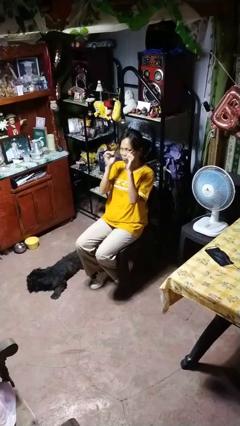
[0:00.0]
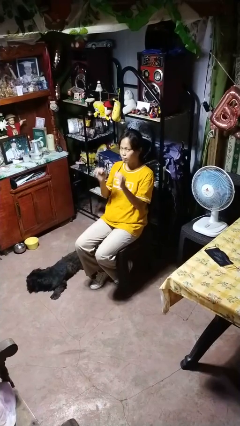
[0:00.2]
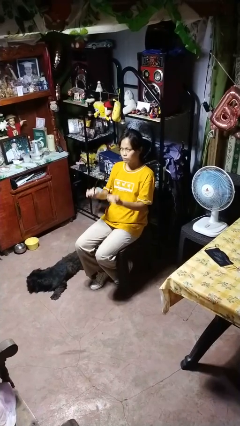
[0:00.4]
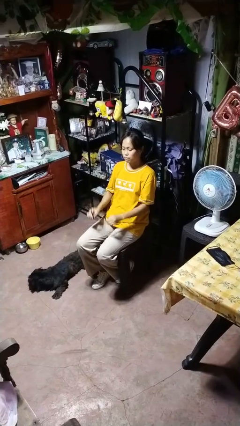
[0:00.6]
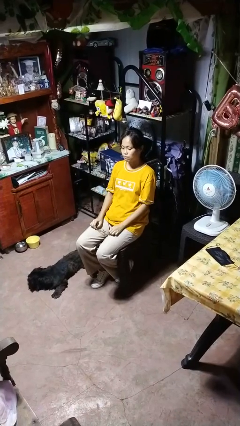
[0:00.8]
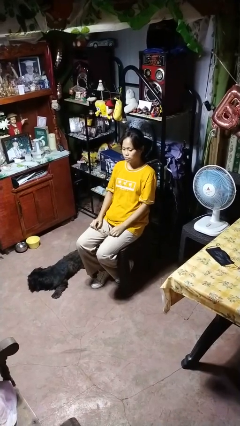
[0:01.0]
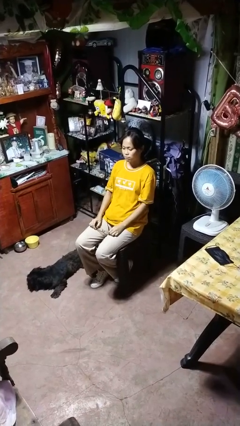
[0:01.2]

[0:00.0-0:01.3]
person takes off glasses

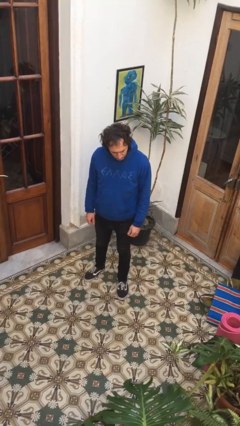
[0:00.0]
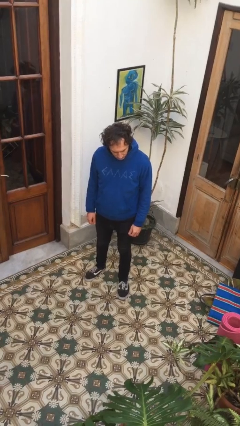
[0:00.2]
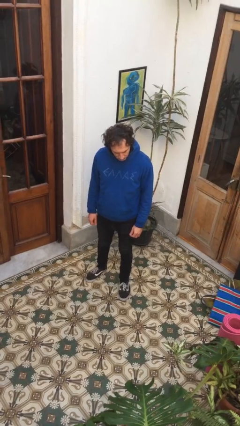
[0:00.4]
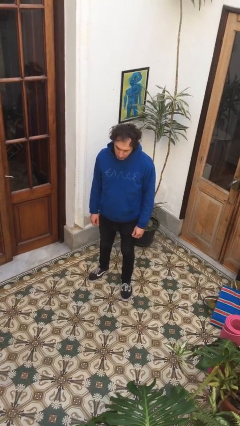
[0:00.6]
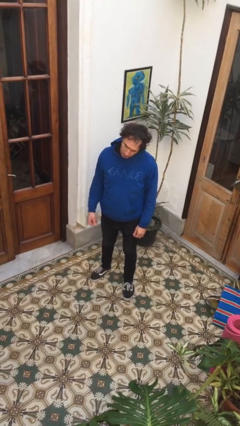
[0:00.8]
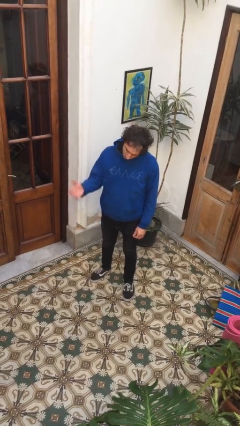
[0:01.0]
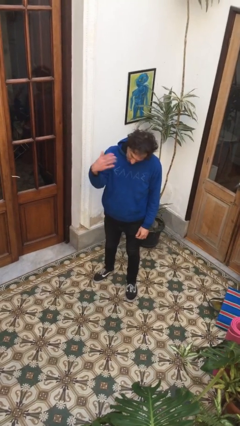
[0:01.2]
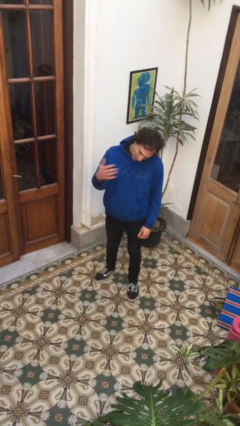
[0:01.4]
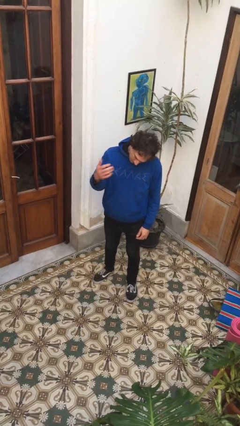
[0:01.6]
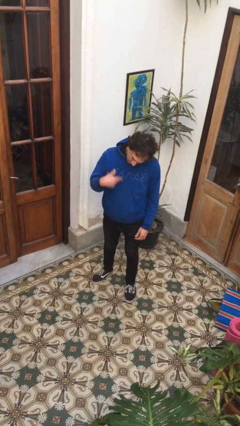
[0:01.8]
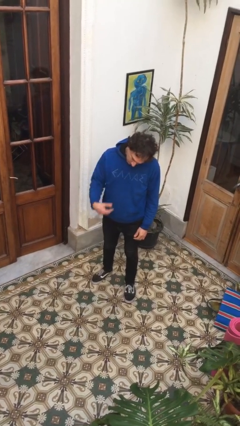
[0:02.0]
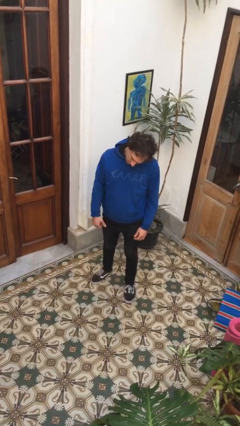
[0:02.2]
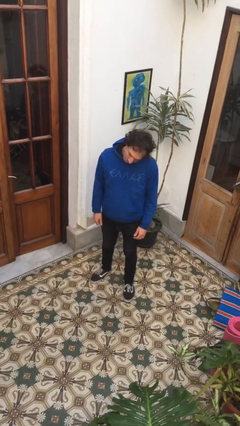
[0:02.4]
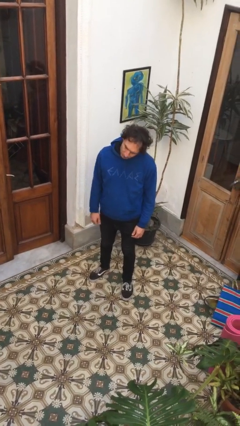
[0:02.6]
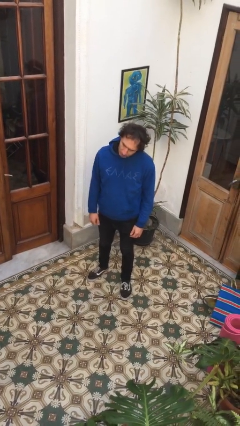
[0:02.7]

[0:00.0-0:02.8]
person gestures come here

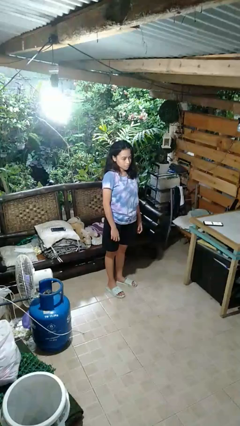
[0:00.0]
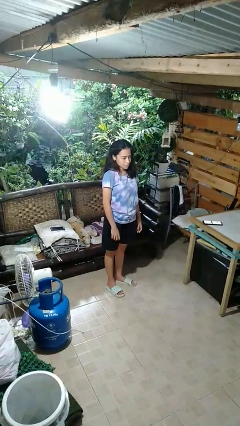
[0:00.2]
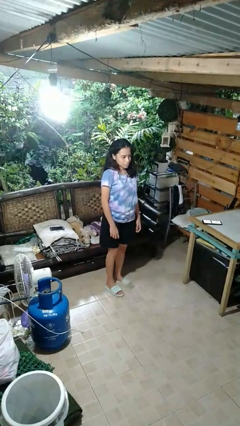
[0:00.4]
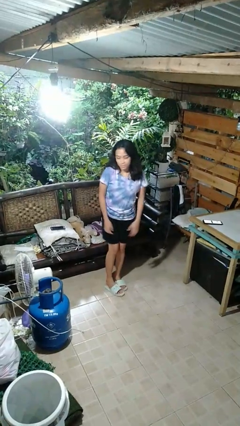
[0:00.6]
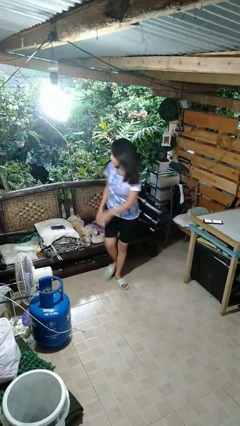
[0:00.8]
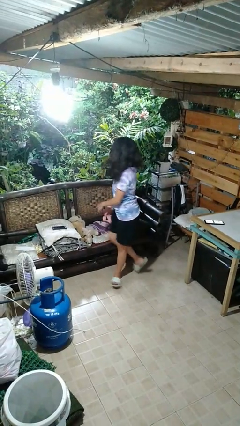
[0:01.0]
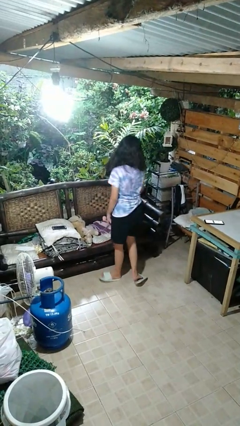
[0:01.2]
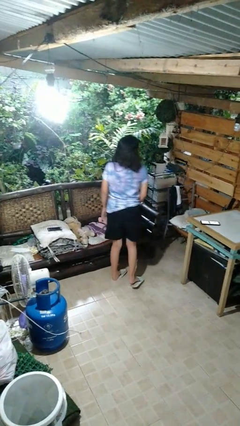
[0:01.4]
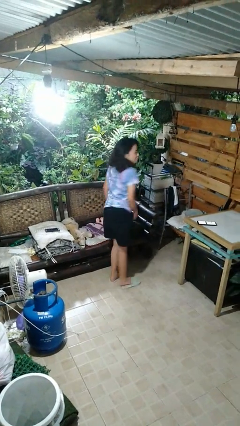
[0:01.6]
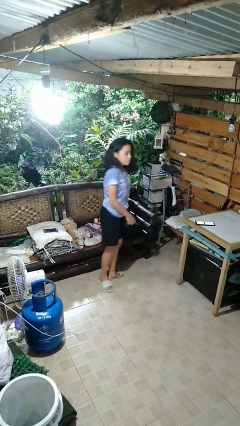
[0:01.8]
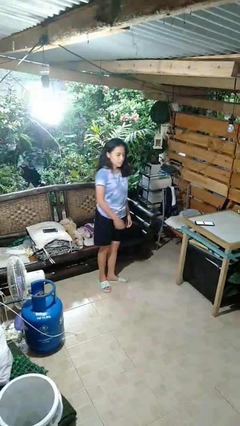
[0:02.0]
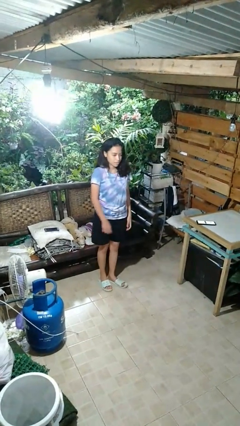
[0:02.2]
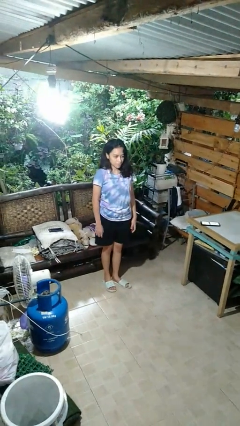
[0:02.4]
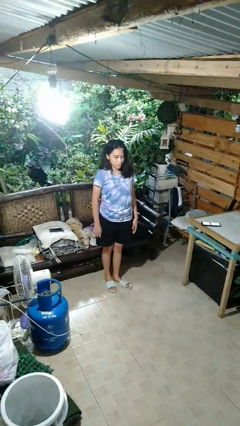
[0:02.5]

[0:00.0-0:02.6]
person twirls

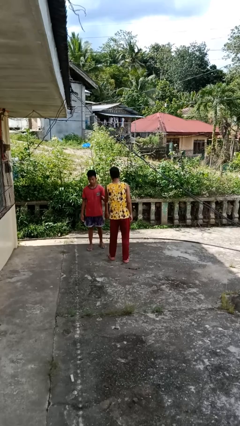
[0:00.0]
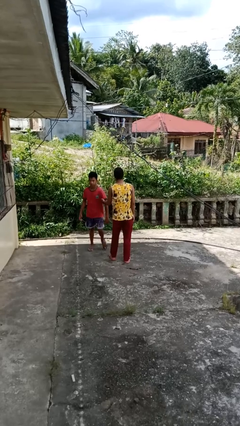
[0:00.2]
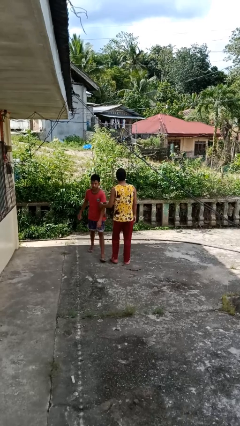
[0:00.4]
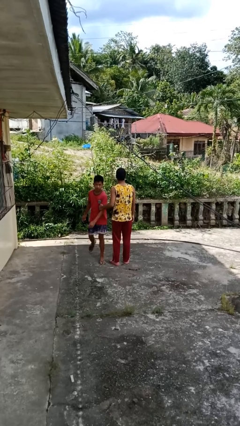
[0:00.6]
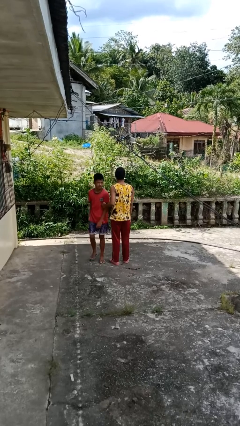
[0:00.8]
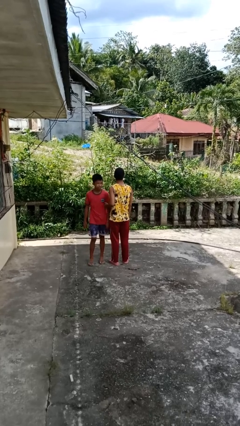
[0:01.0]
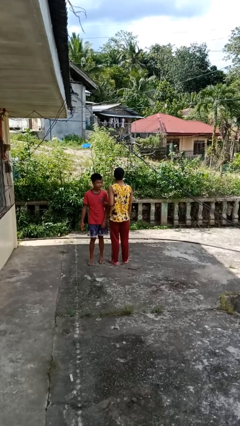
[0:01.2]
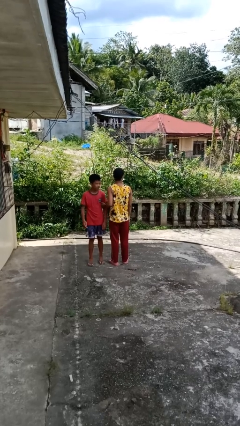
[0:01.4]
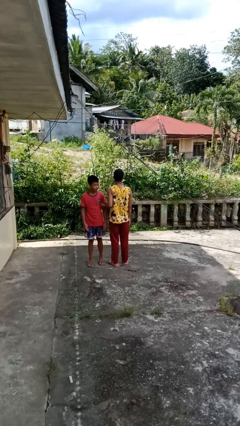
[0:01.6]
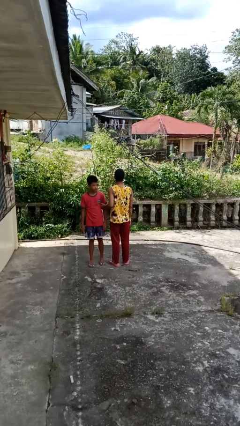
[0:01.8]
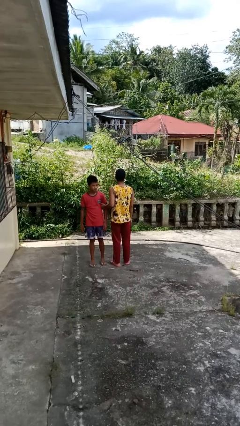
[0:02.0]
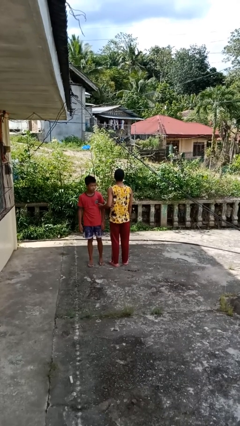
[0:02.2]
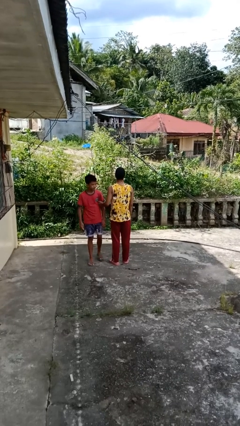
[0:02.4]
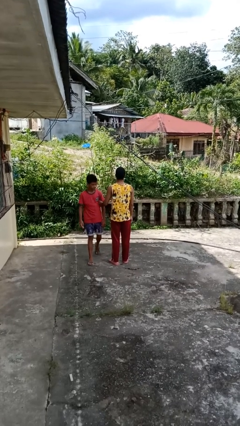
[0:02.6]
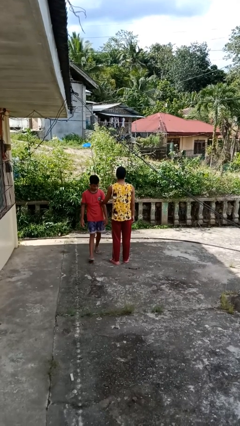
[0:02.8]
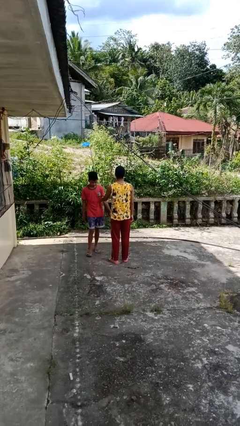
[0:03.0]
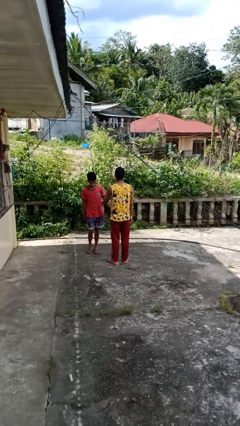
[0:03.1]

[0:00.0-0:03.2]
person grabs person by bicep

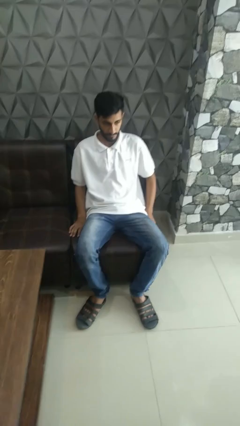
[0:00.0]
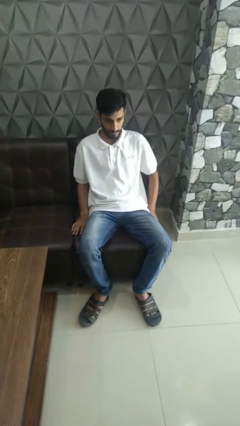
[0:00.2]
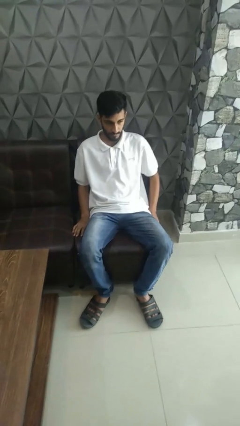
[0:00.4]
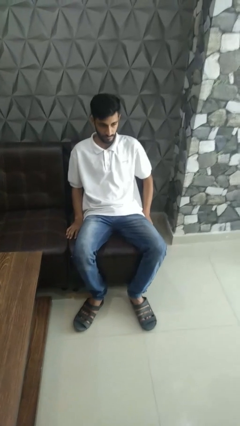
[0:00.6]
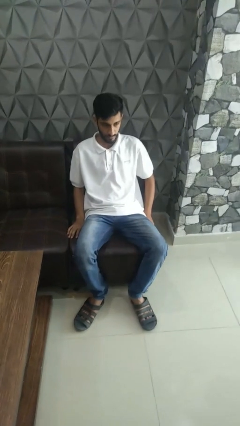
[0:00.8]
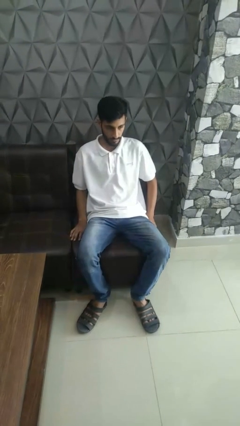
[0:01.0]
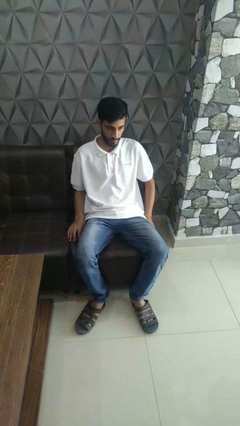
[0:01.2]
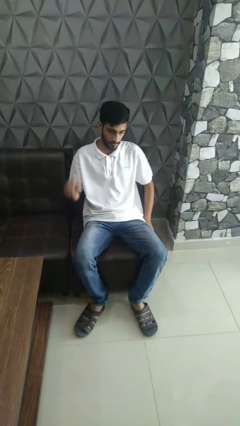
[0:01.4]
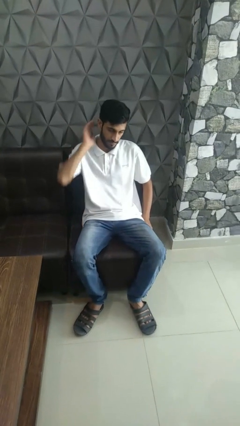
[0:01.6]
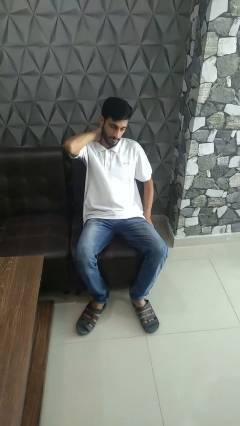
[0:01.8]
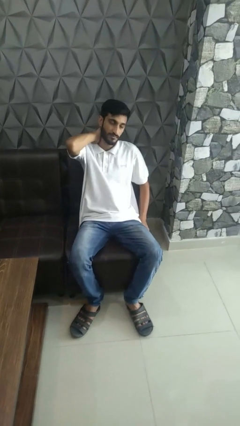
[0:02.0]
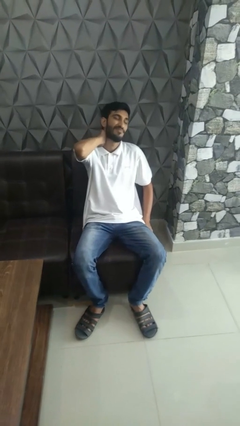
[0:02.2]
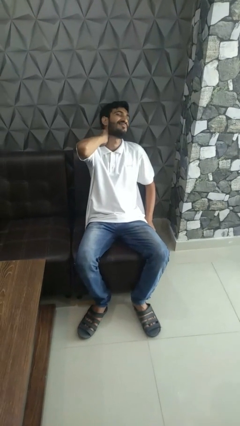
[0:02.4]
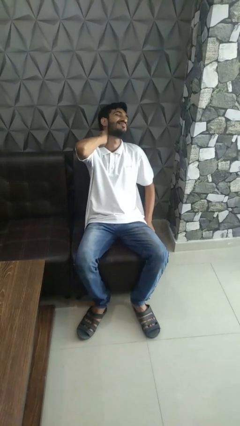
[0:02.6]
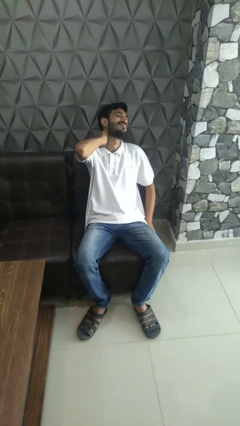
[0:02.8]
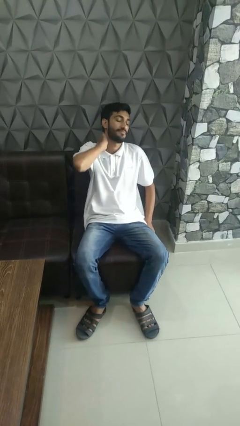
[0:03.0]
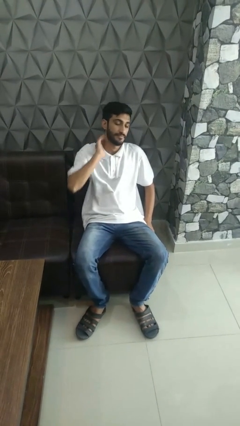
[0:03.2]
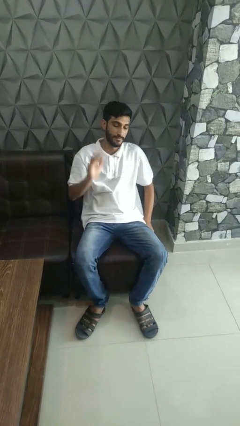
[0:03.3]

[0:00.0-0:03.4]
person rubs neck

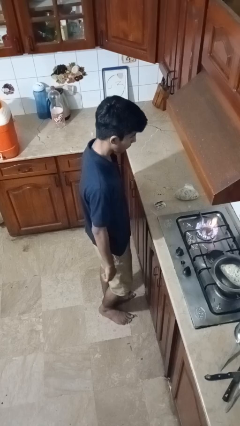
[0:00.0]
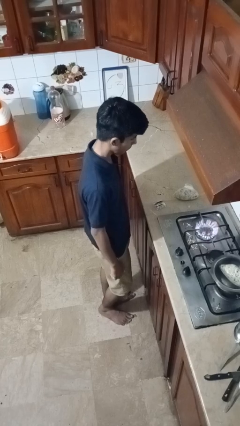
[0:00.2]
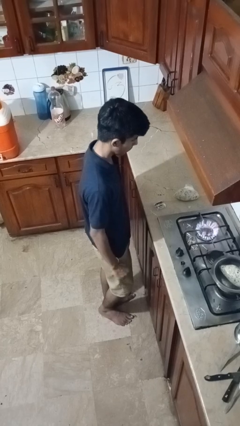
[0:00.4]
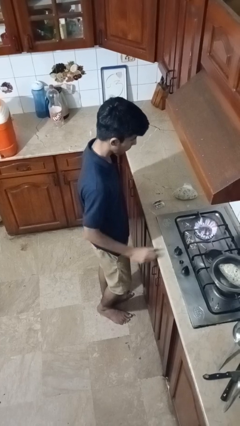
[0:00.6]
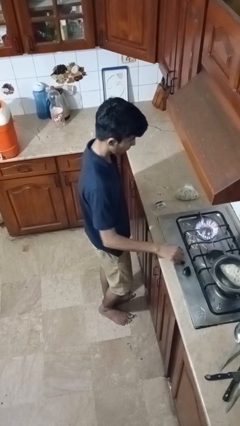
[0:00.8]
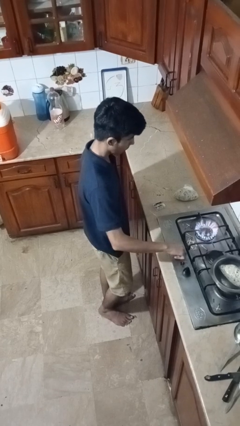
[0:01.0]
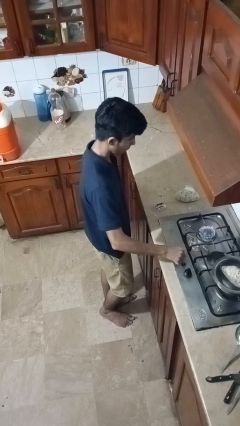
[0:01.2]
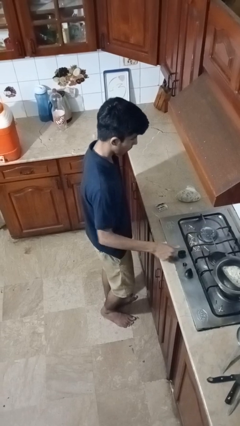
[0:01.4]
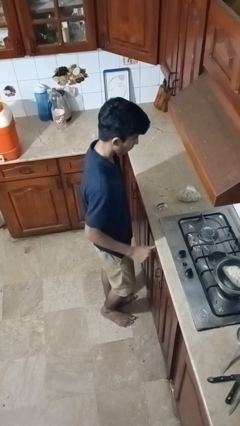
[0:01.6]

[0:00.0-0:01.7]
person turns off stovetop

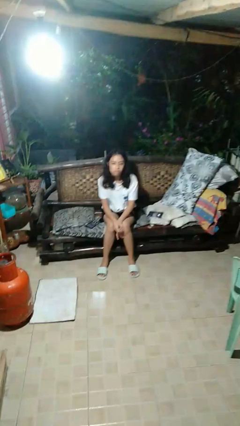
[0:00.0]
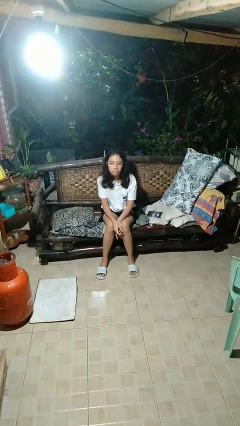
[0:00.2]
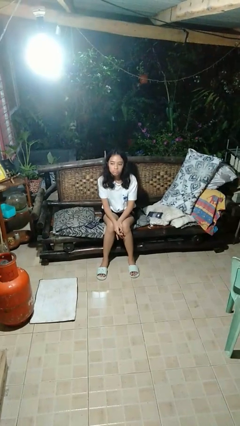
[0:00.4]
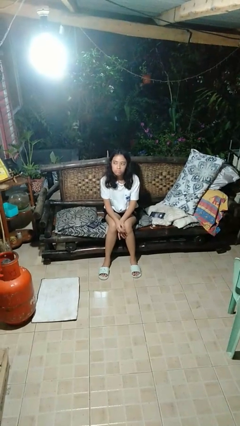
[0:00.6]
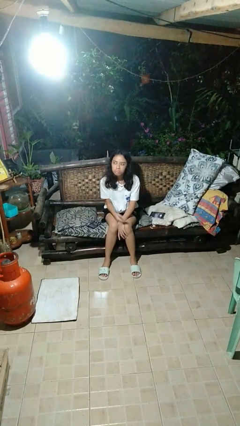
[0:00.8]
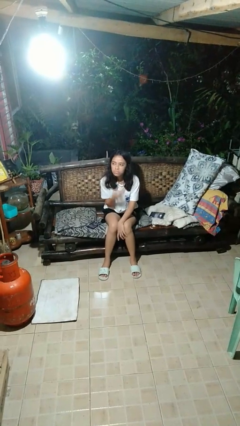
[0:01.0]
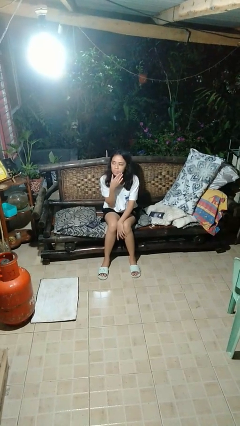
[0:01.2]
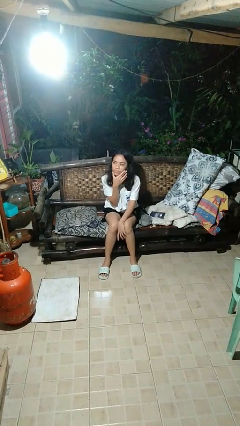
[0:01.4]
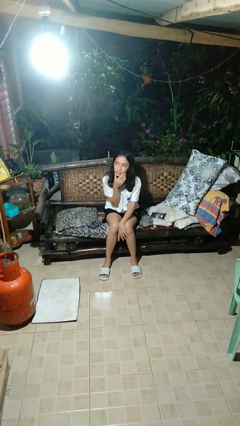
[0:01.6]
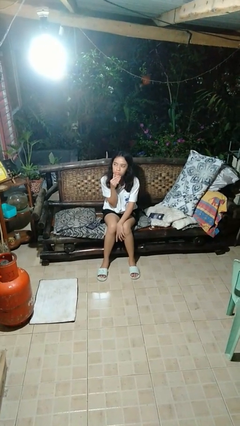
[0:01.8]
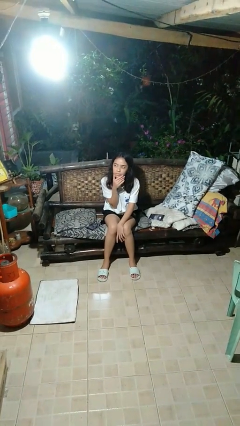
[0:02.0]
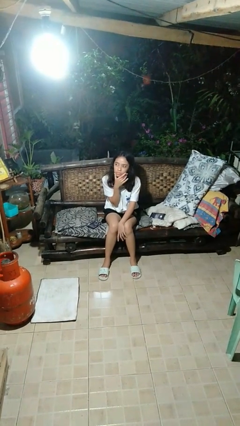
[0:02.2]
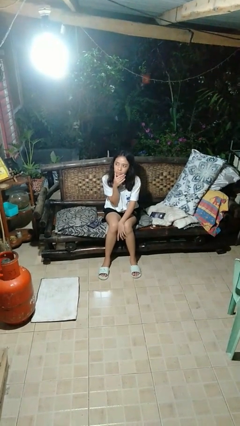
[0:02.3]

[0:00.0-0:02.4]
person strokes chin
